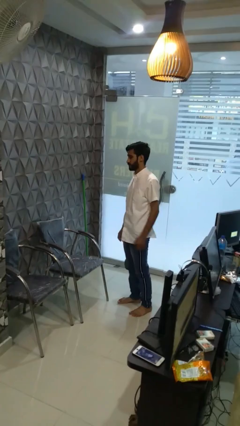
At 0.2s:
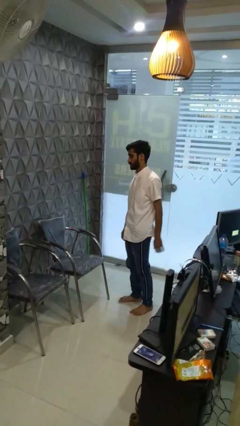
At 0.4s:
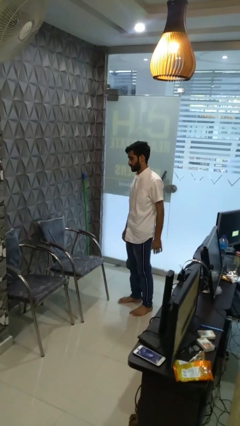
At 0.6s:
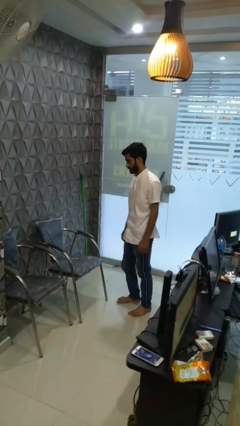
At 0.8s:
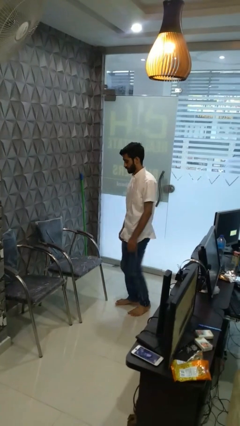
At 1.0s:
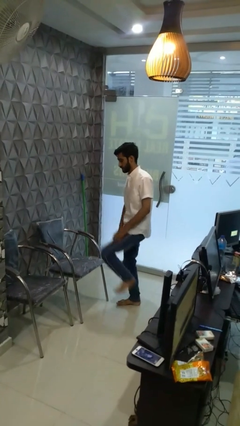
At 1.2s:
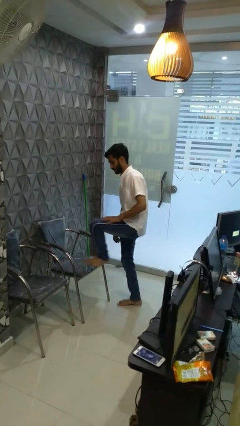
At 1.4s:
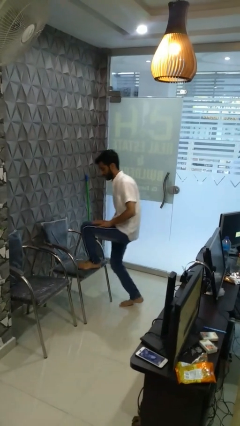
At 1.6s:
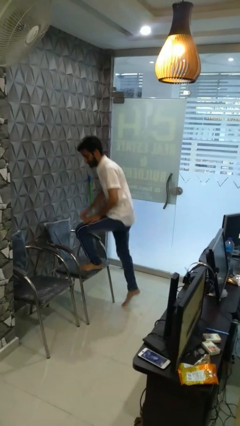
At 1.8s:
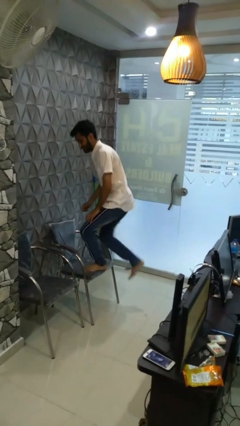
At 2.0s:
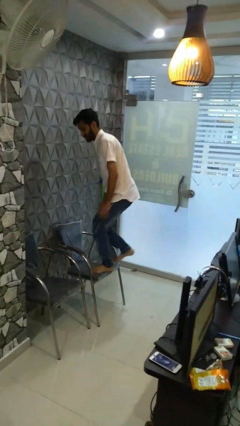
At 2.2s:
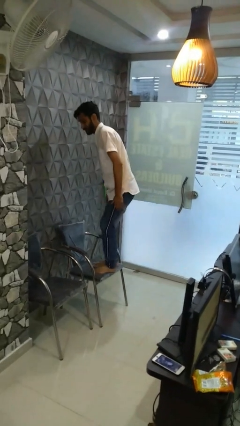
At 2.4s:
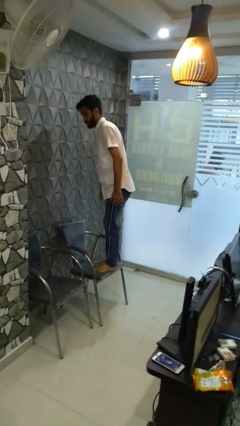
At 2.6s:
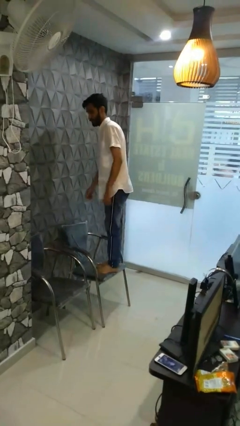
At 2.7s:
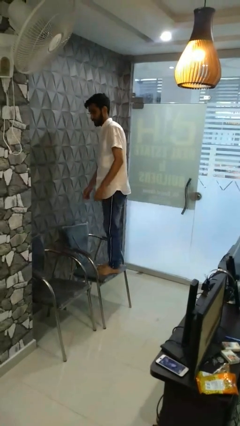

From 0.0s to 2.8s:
person climbs on chair

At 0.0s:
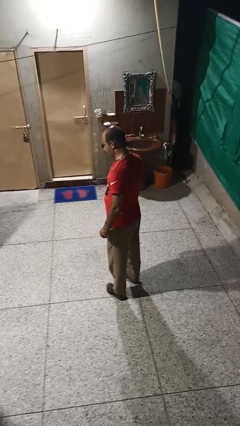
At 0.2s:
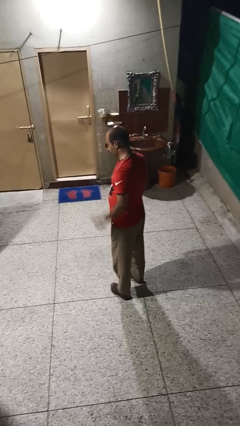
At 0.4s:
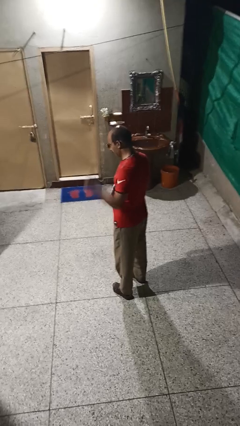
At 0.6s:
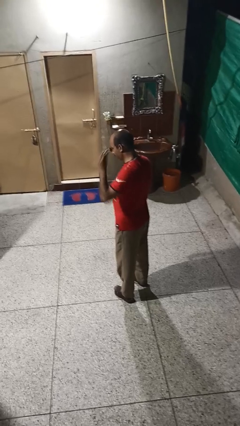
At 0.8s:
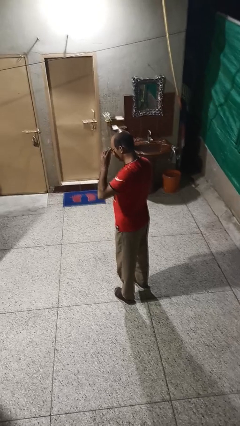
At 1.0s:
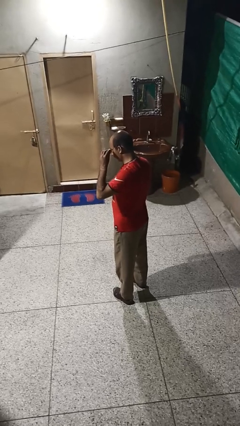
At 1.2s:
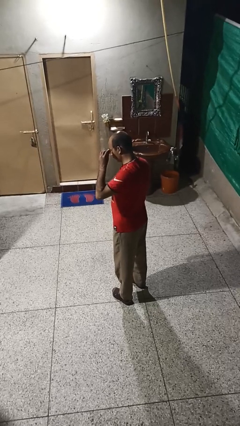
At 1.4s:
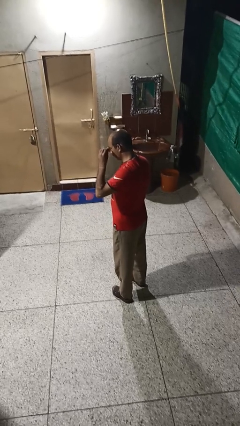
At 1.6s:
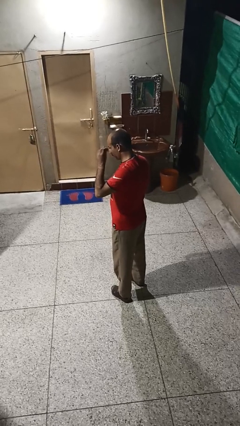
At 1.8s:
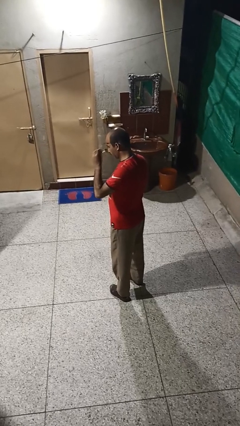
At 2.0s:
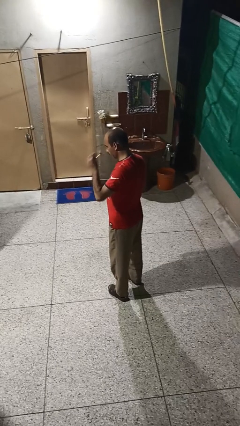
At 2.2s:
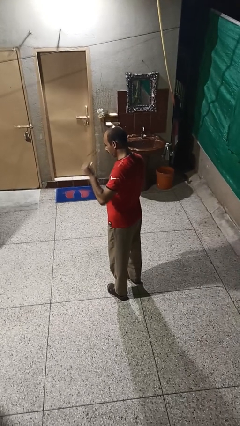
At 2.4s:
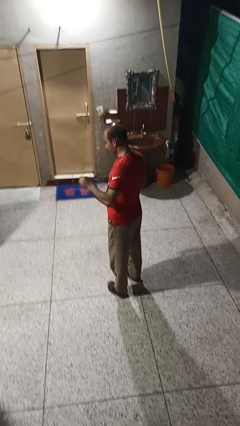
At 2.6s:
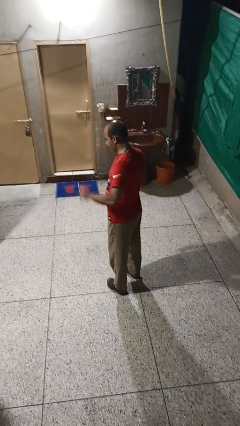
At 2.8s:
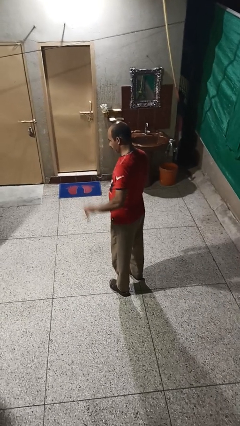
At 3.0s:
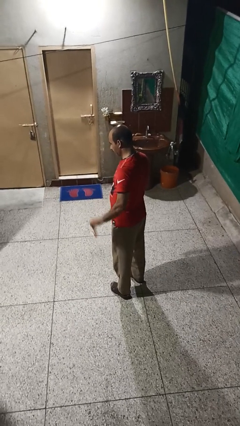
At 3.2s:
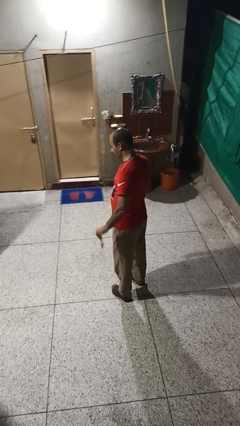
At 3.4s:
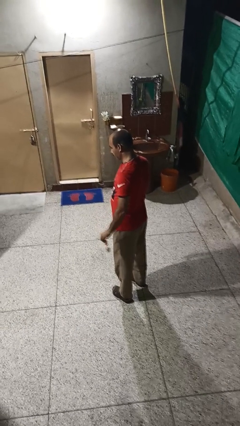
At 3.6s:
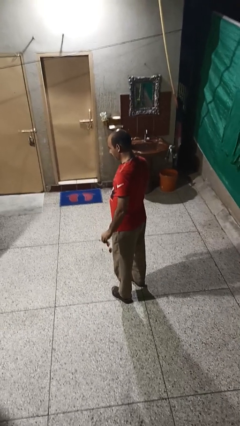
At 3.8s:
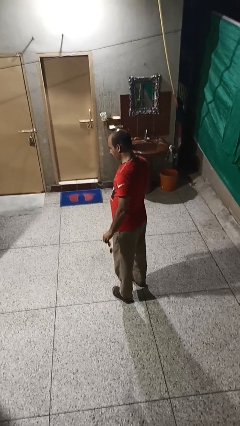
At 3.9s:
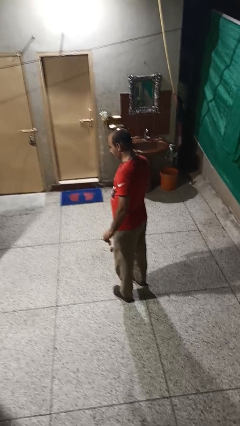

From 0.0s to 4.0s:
person takes off sunglasses

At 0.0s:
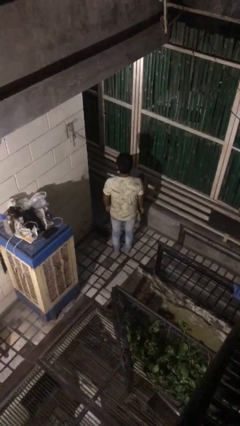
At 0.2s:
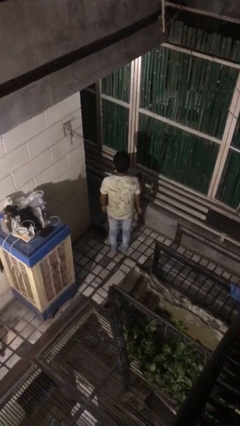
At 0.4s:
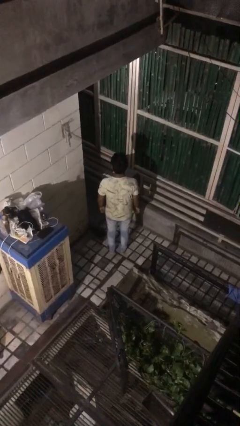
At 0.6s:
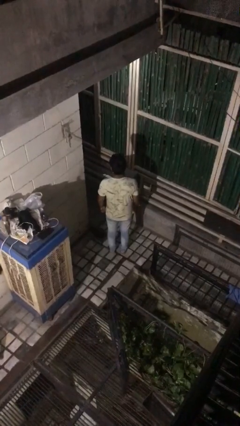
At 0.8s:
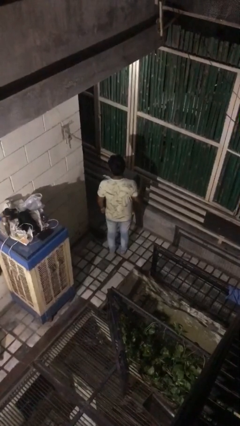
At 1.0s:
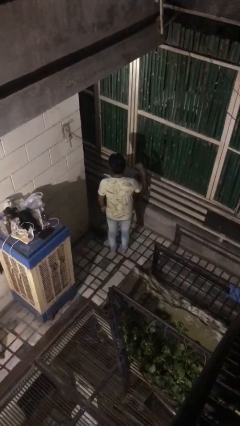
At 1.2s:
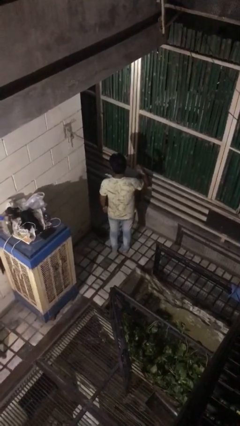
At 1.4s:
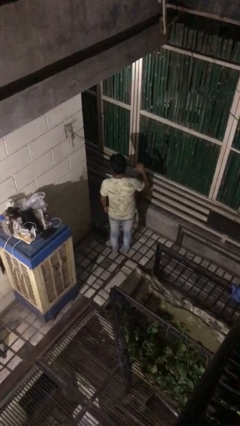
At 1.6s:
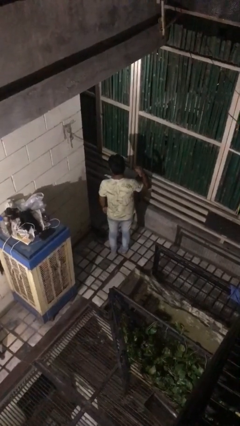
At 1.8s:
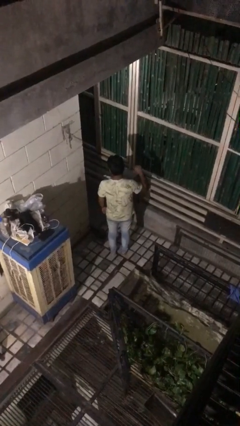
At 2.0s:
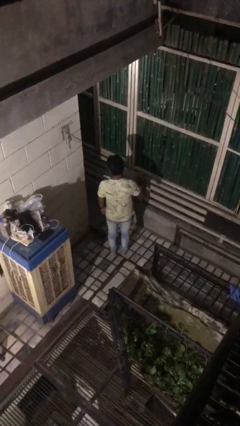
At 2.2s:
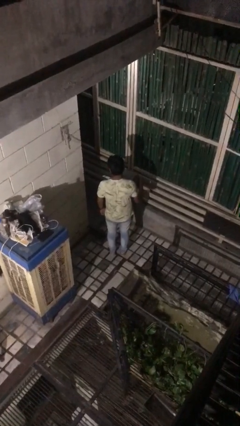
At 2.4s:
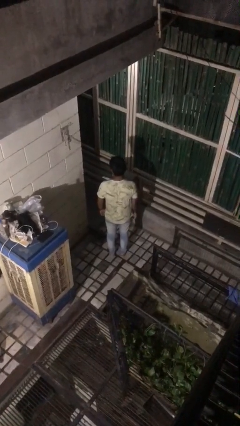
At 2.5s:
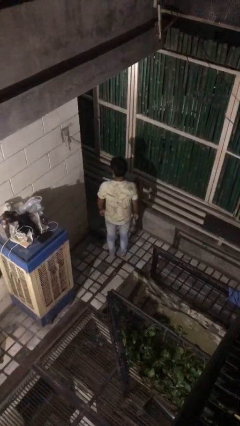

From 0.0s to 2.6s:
person gestures behind me

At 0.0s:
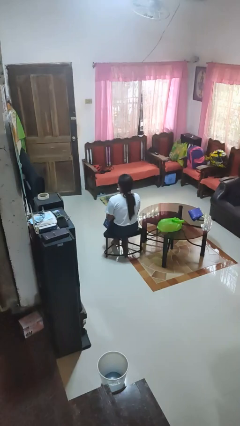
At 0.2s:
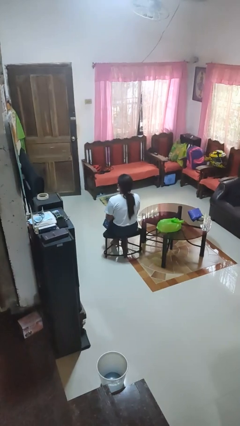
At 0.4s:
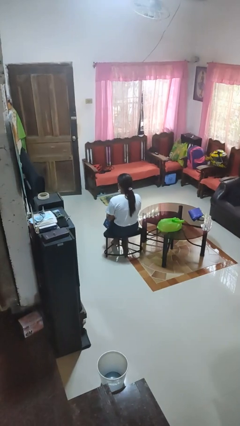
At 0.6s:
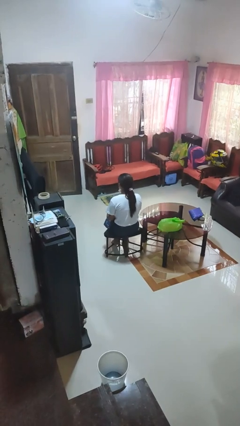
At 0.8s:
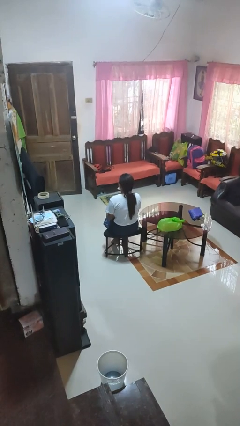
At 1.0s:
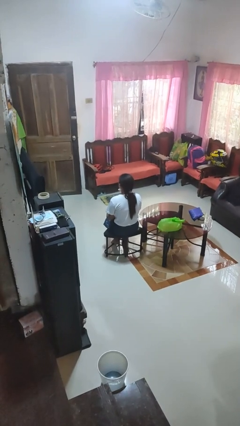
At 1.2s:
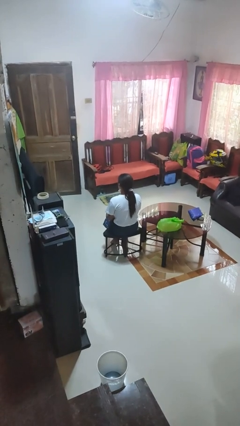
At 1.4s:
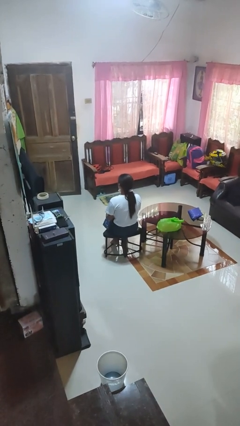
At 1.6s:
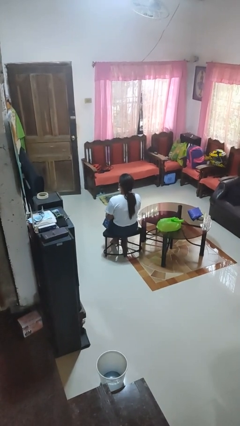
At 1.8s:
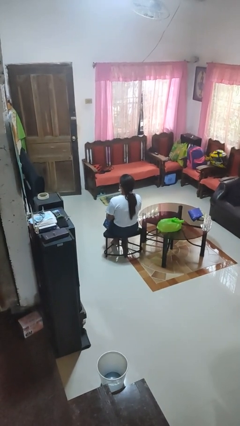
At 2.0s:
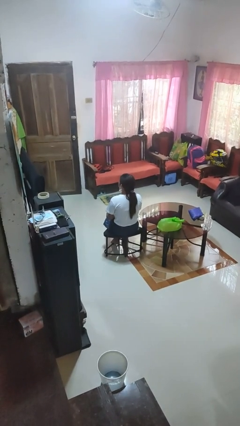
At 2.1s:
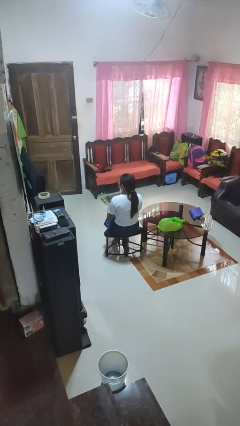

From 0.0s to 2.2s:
person nods head

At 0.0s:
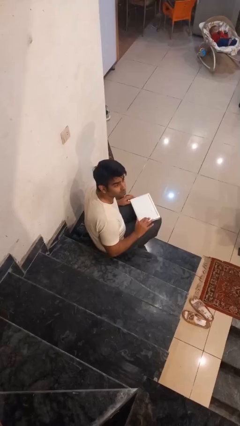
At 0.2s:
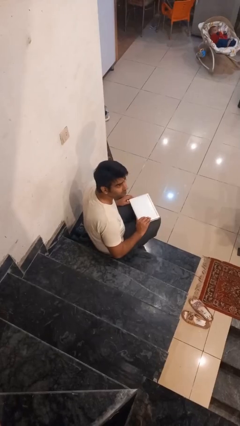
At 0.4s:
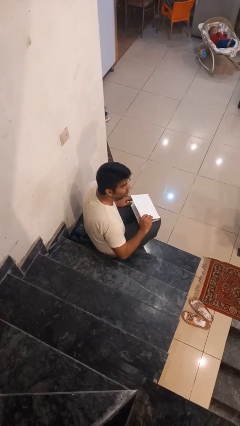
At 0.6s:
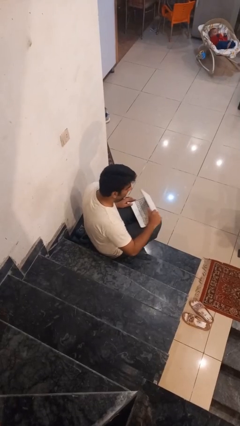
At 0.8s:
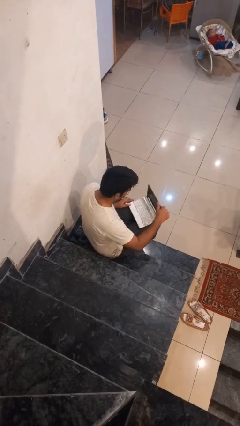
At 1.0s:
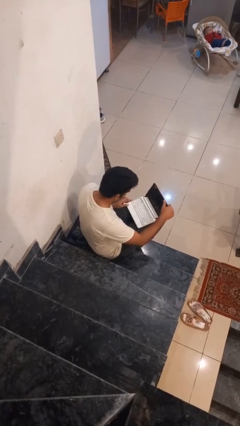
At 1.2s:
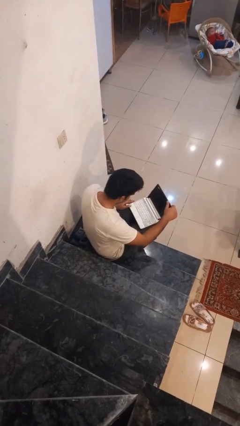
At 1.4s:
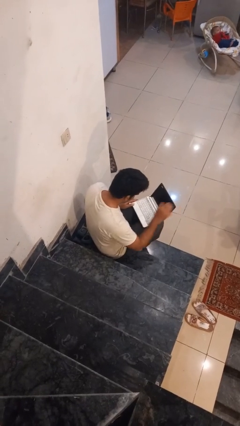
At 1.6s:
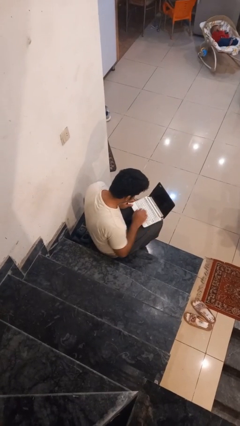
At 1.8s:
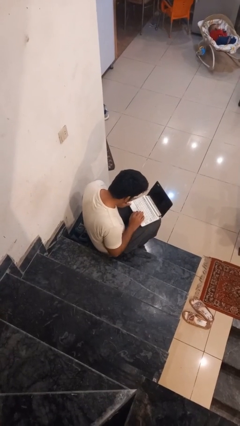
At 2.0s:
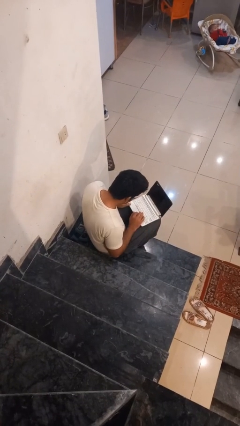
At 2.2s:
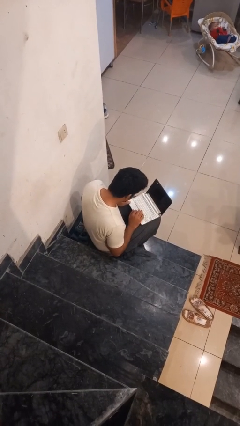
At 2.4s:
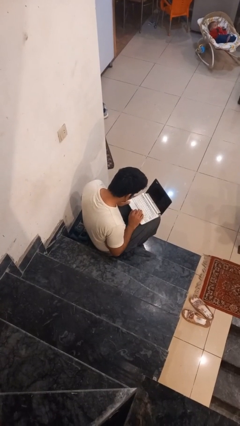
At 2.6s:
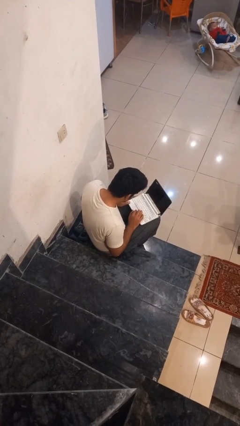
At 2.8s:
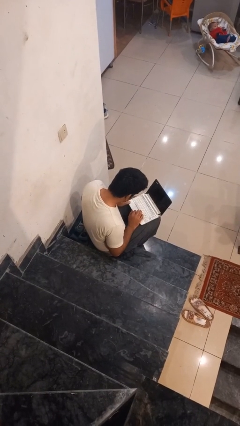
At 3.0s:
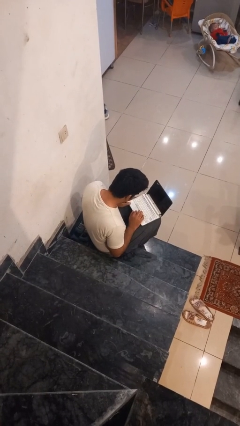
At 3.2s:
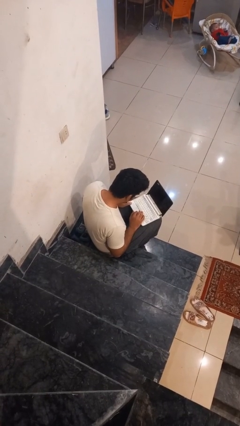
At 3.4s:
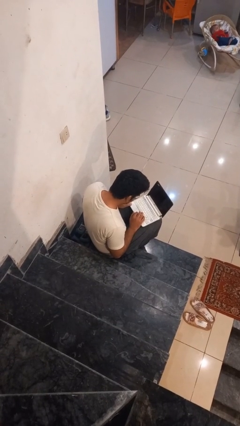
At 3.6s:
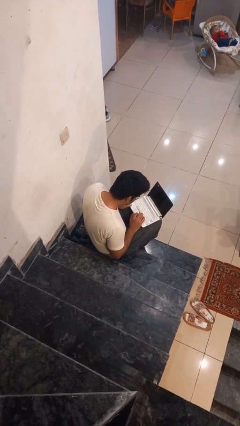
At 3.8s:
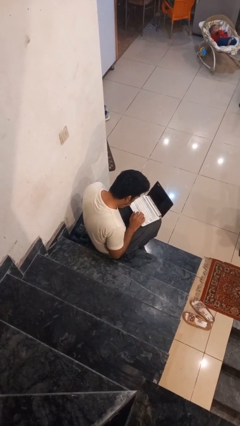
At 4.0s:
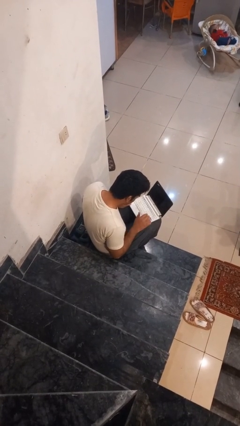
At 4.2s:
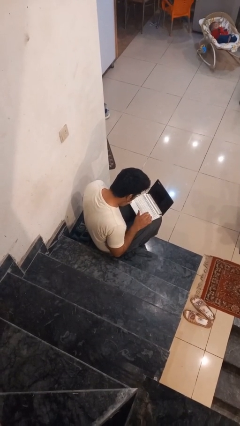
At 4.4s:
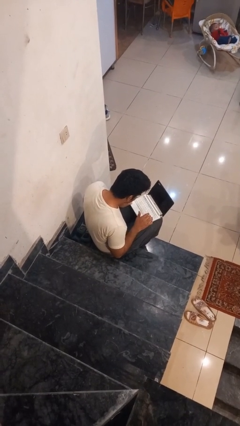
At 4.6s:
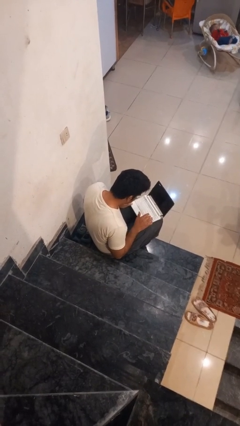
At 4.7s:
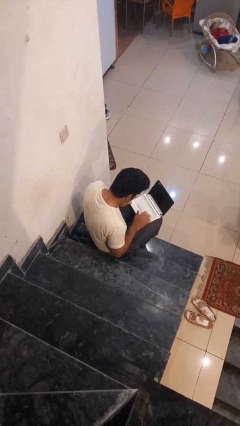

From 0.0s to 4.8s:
person interacts with laptop

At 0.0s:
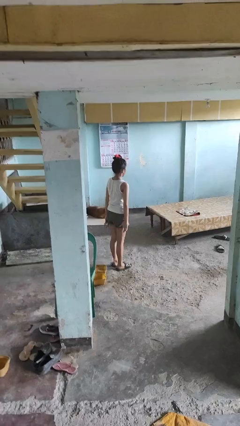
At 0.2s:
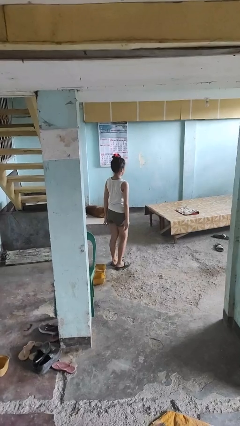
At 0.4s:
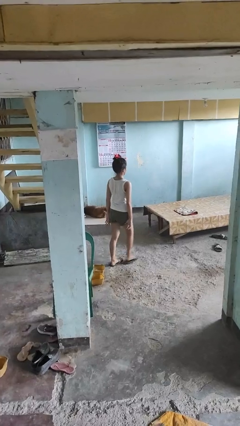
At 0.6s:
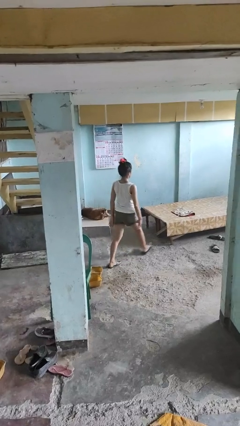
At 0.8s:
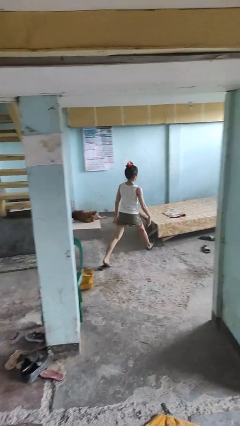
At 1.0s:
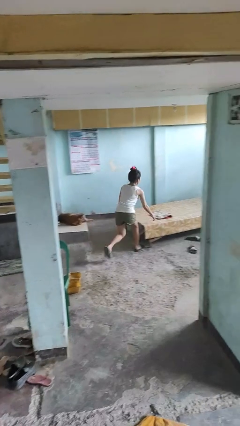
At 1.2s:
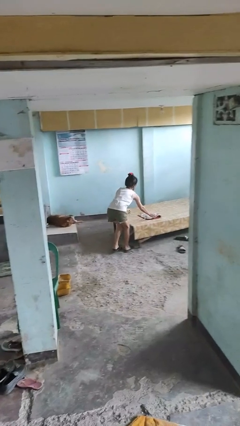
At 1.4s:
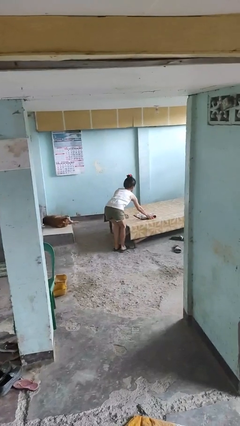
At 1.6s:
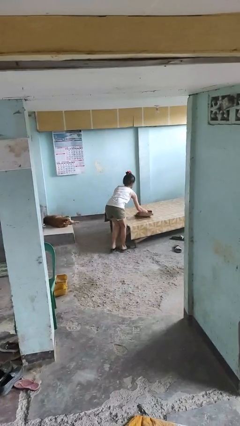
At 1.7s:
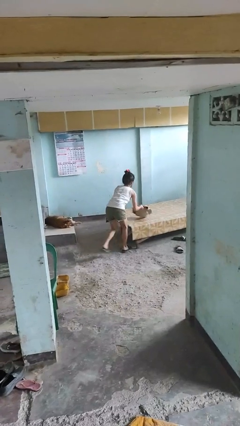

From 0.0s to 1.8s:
person picks up object from table
